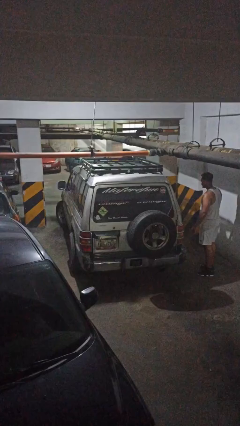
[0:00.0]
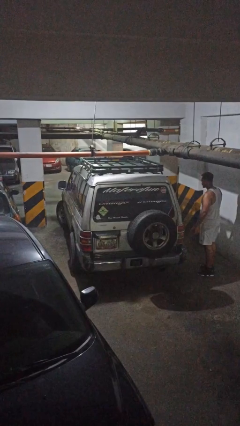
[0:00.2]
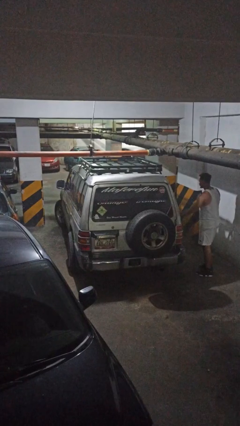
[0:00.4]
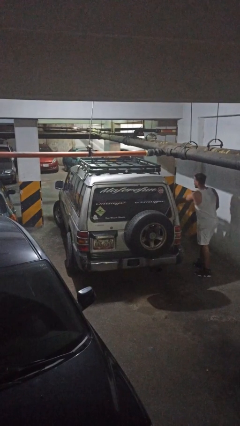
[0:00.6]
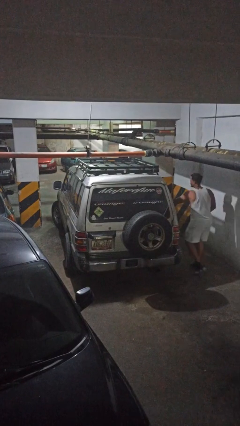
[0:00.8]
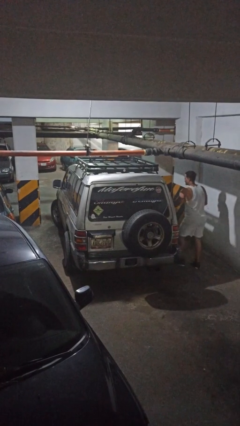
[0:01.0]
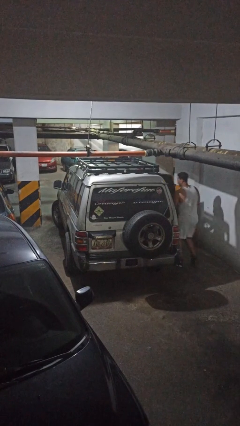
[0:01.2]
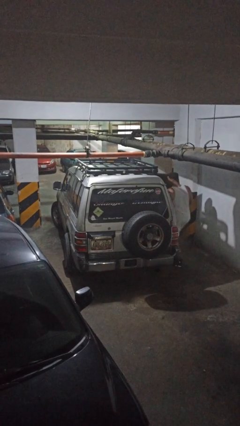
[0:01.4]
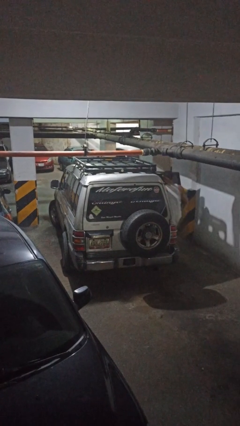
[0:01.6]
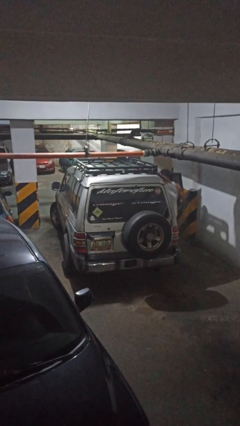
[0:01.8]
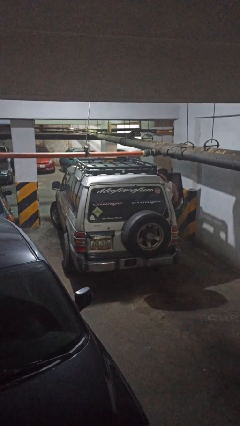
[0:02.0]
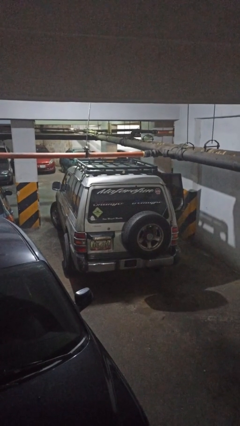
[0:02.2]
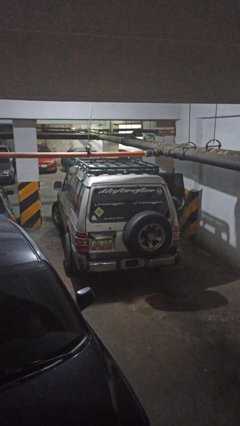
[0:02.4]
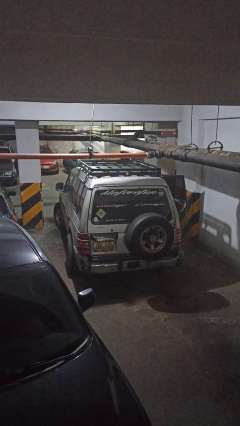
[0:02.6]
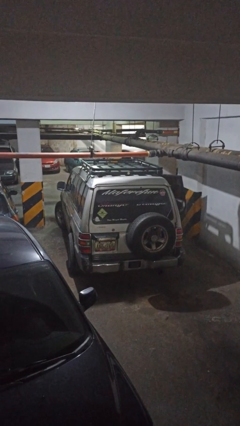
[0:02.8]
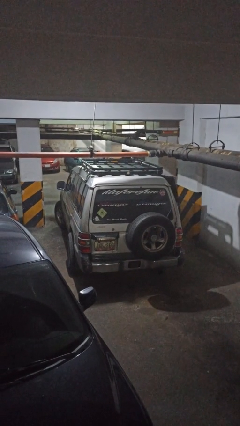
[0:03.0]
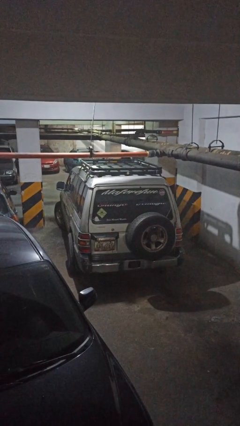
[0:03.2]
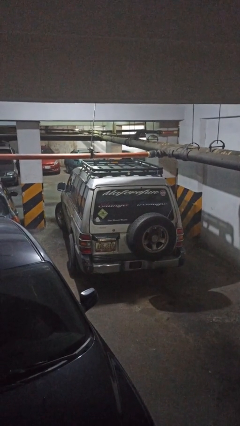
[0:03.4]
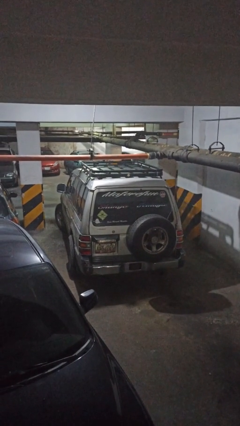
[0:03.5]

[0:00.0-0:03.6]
car picks up person

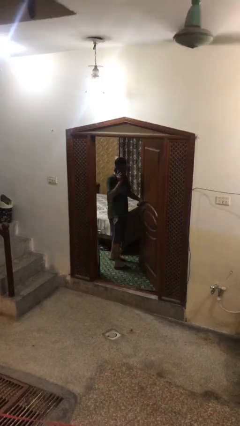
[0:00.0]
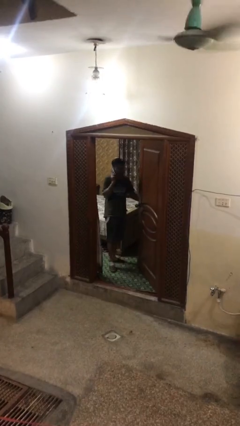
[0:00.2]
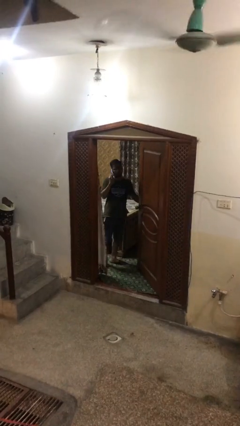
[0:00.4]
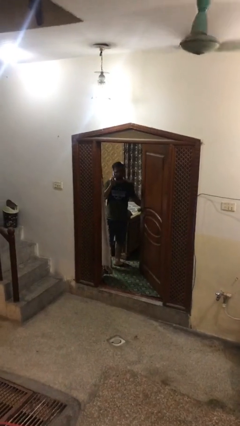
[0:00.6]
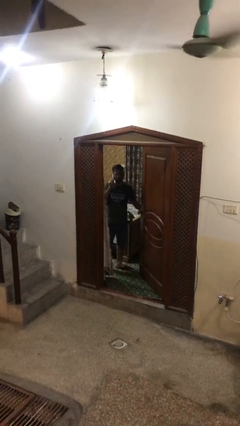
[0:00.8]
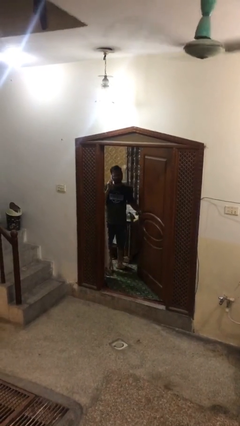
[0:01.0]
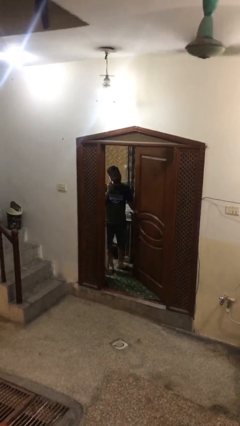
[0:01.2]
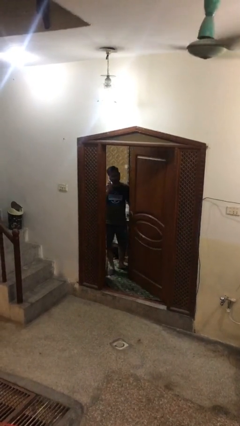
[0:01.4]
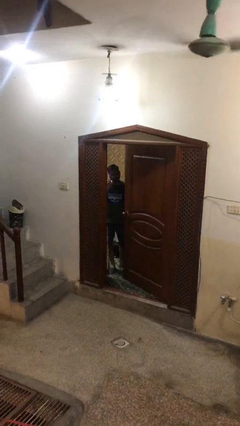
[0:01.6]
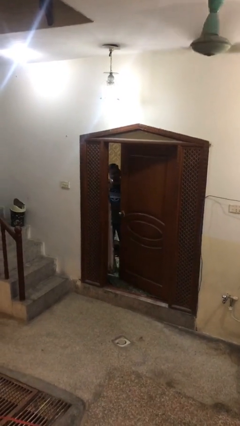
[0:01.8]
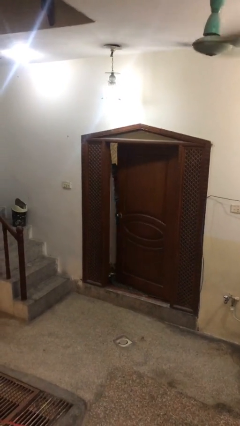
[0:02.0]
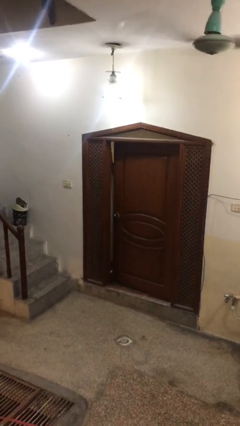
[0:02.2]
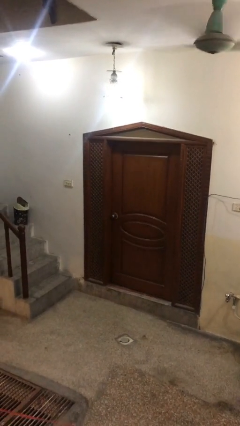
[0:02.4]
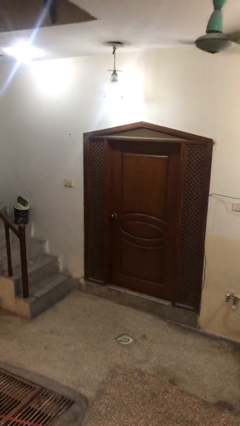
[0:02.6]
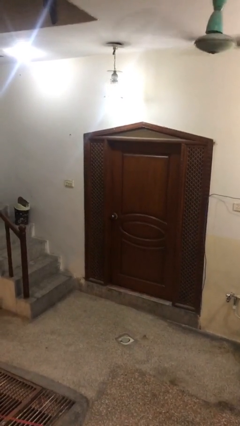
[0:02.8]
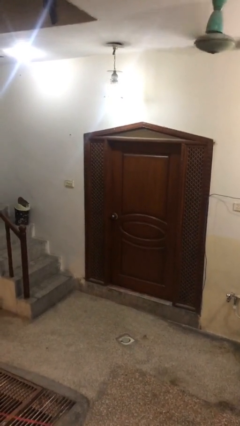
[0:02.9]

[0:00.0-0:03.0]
person closes facility door

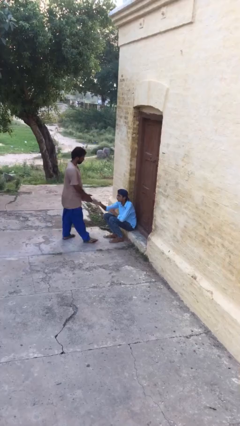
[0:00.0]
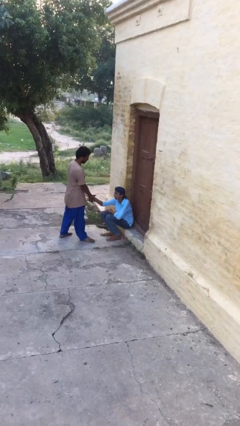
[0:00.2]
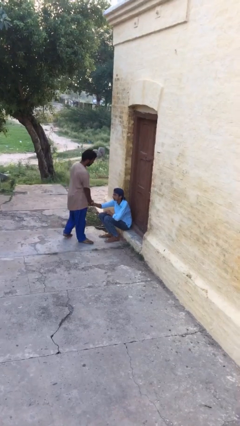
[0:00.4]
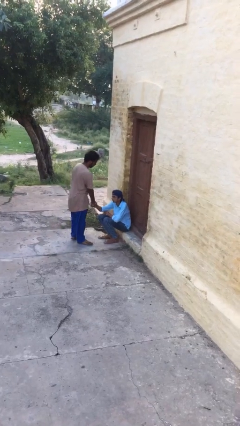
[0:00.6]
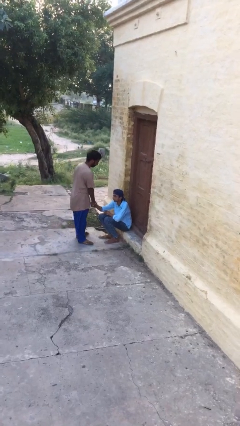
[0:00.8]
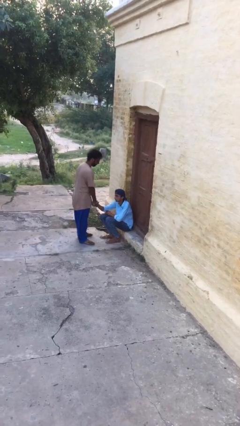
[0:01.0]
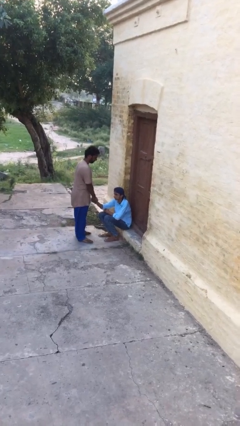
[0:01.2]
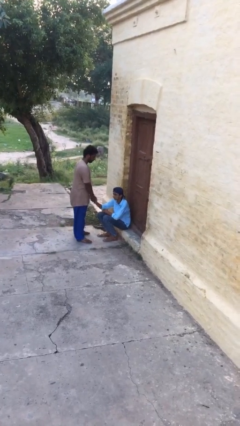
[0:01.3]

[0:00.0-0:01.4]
person shakes hand

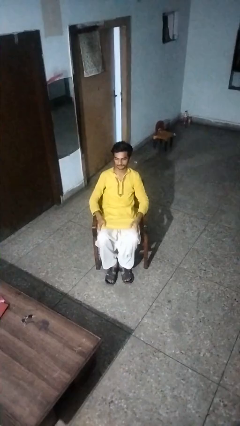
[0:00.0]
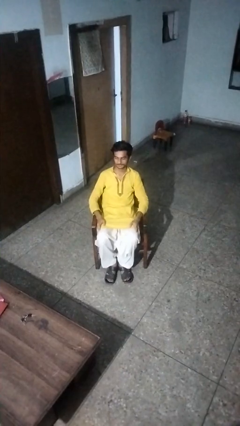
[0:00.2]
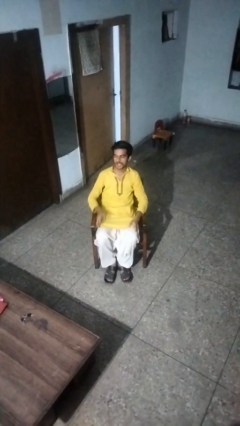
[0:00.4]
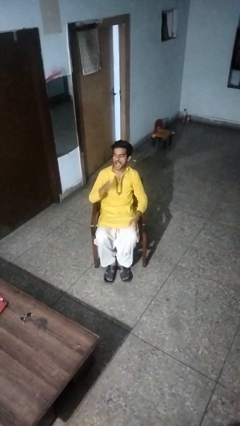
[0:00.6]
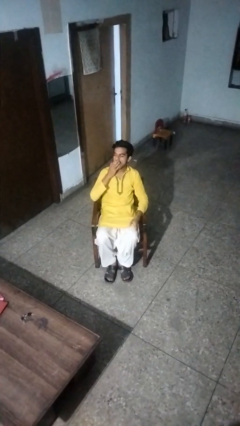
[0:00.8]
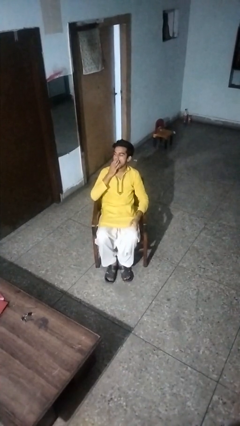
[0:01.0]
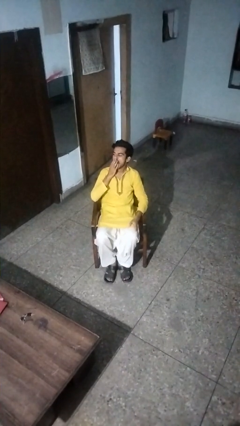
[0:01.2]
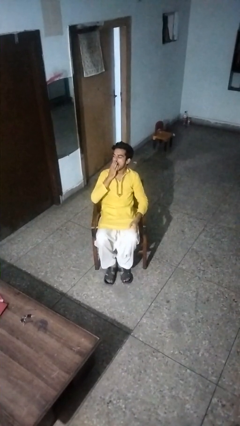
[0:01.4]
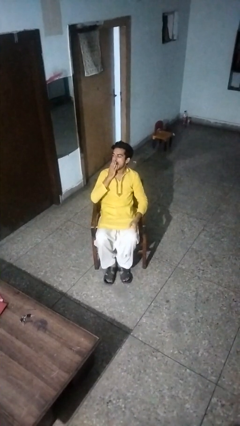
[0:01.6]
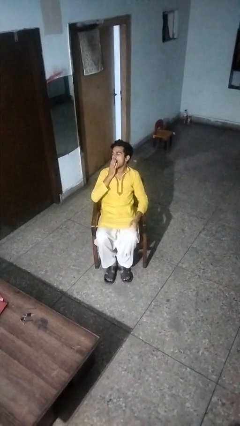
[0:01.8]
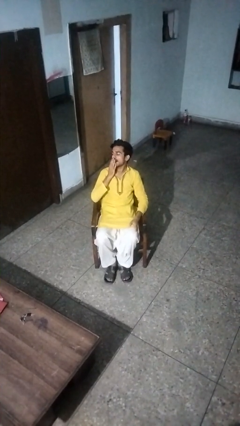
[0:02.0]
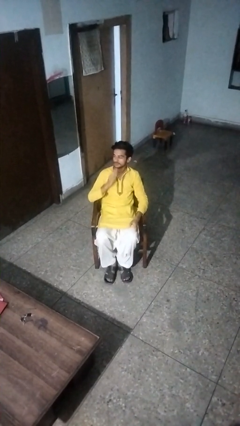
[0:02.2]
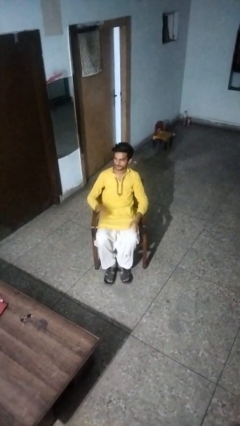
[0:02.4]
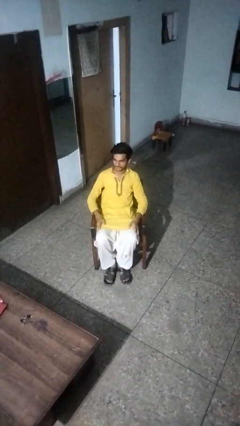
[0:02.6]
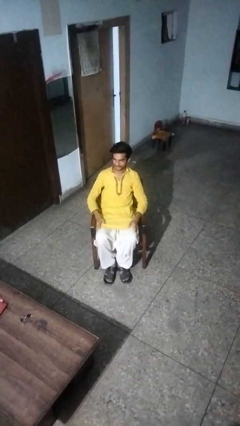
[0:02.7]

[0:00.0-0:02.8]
person yawns

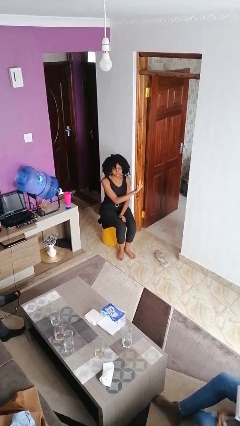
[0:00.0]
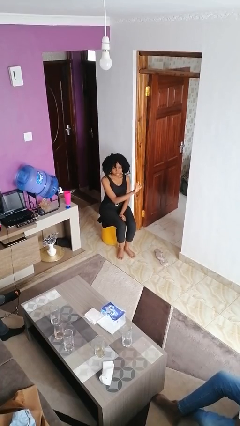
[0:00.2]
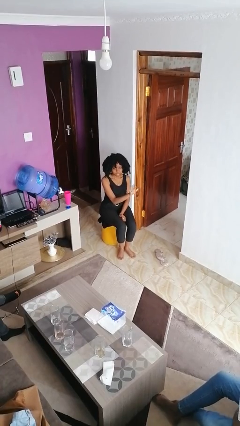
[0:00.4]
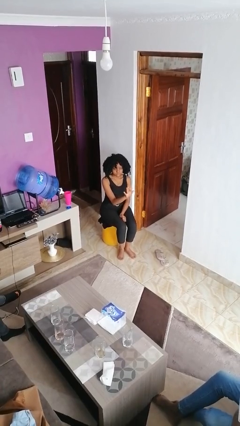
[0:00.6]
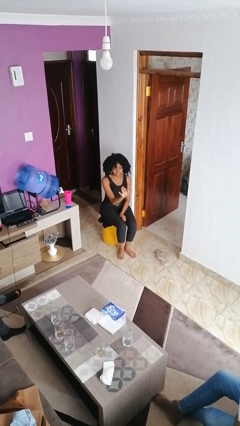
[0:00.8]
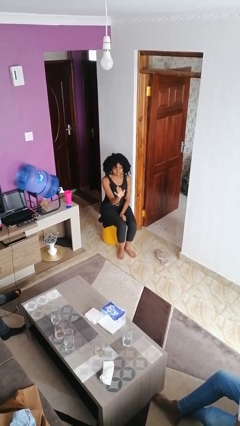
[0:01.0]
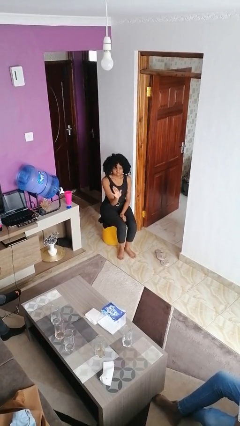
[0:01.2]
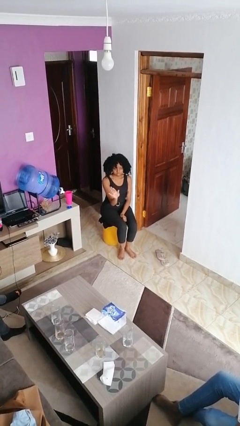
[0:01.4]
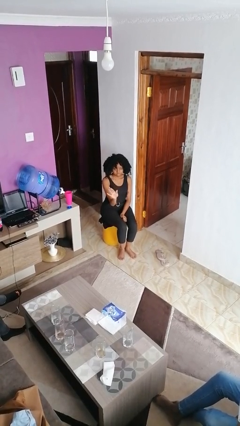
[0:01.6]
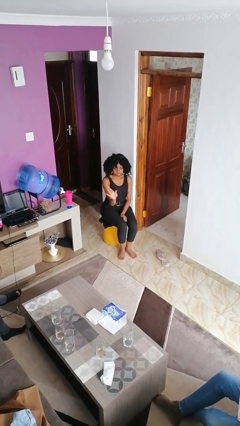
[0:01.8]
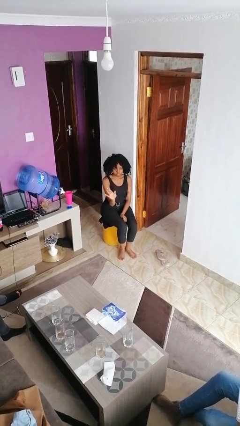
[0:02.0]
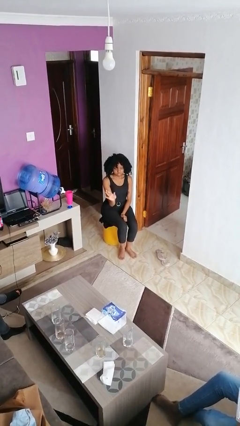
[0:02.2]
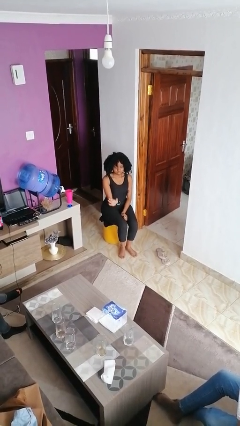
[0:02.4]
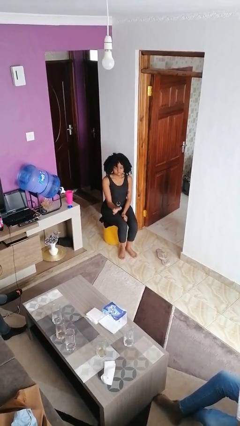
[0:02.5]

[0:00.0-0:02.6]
person gestures swipe right

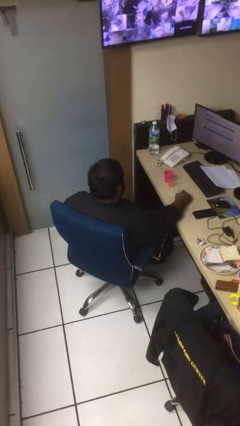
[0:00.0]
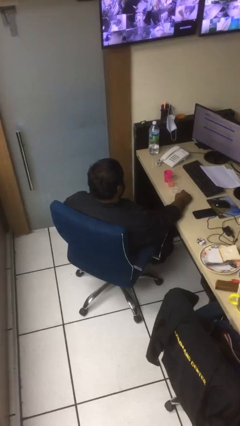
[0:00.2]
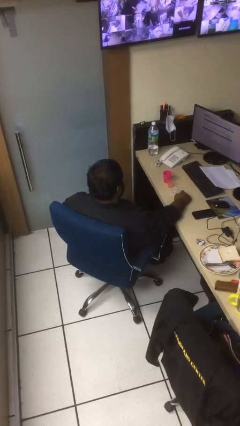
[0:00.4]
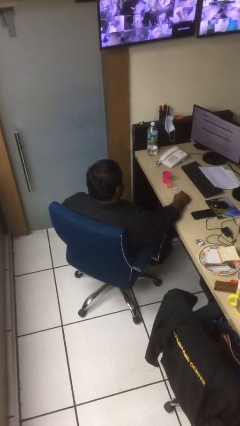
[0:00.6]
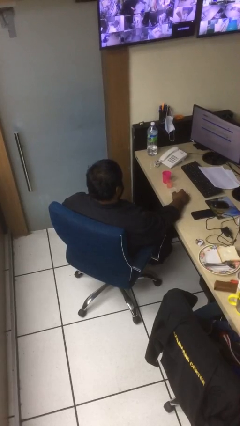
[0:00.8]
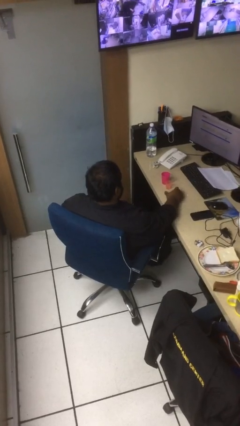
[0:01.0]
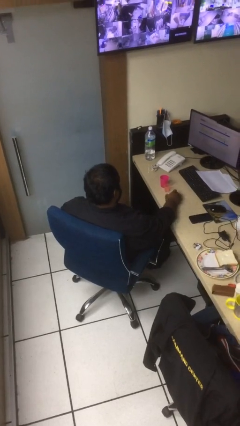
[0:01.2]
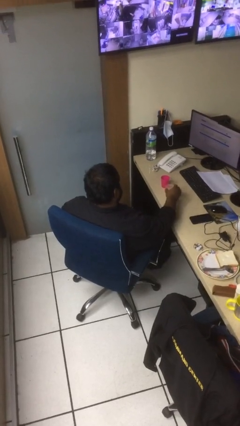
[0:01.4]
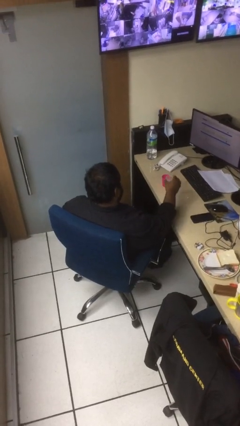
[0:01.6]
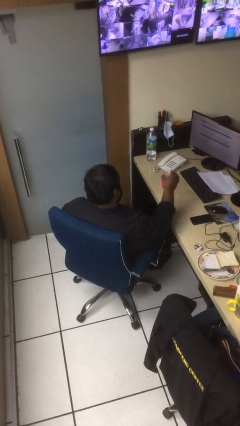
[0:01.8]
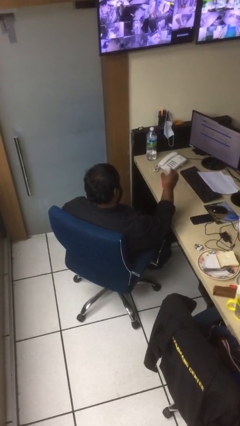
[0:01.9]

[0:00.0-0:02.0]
person picks up object from table

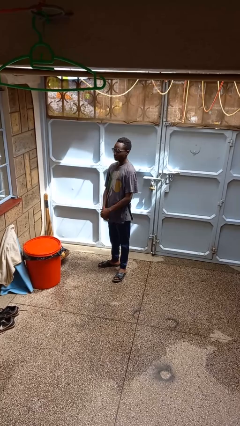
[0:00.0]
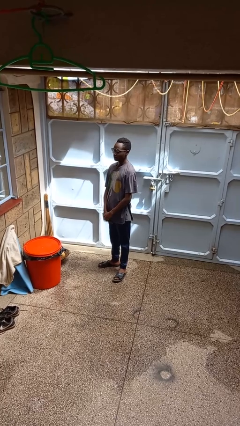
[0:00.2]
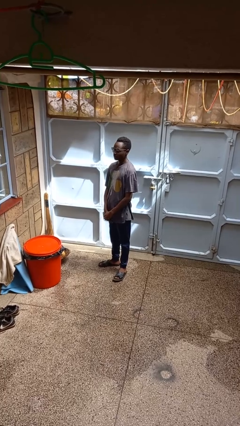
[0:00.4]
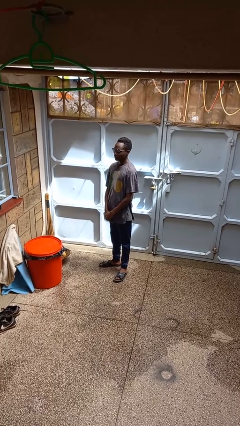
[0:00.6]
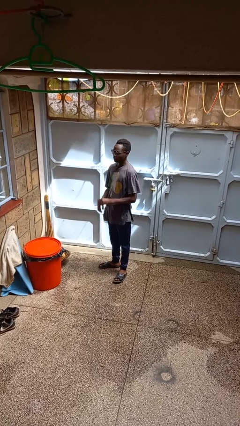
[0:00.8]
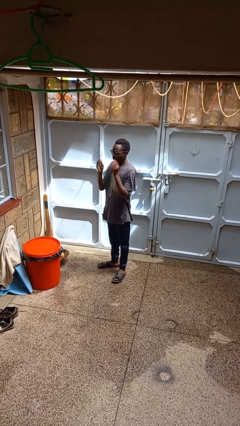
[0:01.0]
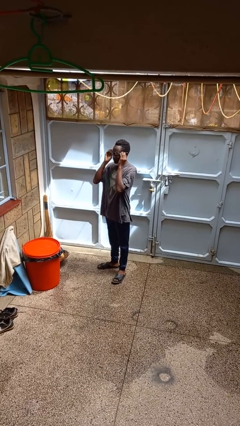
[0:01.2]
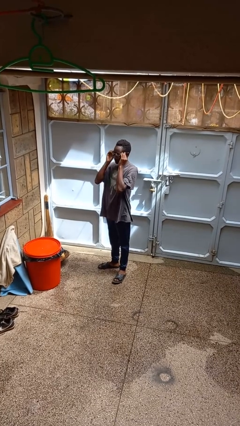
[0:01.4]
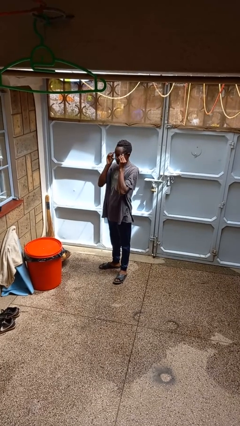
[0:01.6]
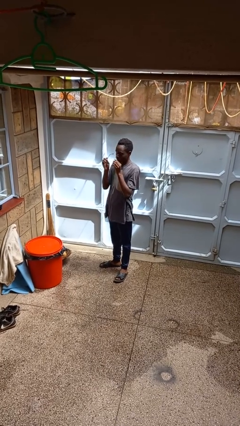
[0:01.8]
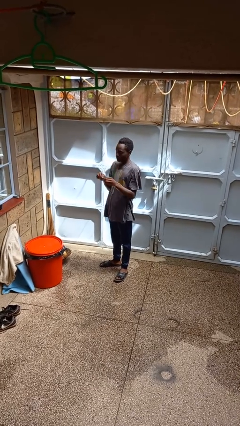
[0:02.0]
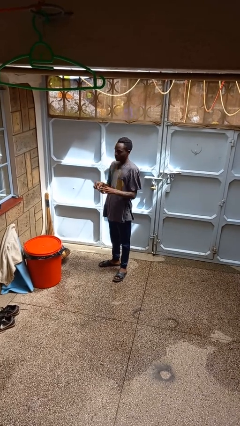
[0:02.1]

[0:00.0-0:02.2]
person takes off glasses
